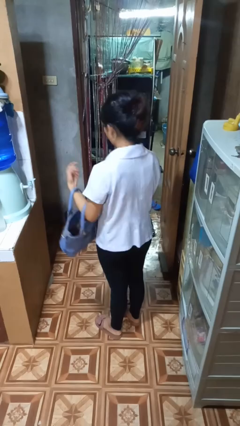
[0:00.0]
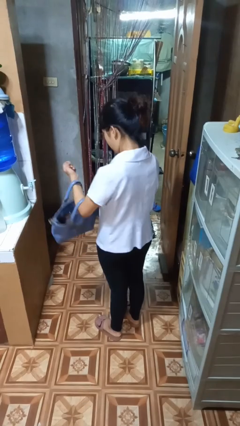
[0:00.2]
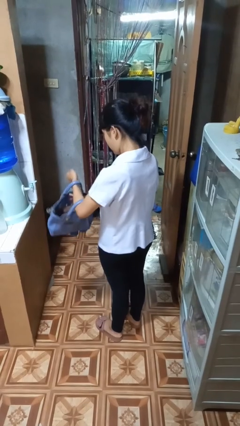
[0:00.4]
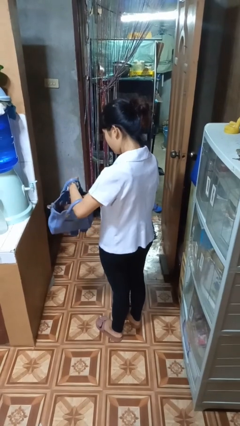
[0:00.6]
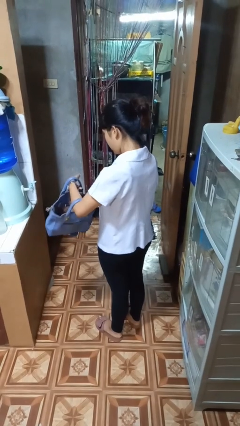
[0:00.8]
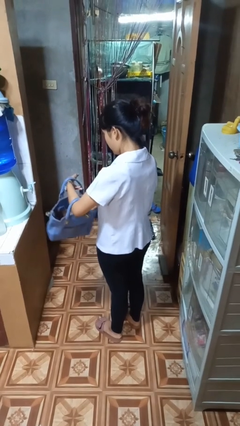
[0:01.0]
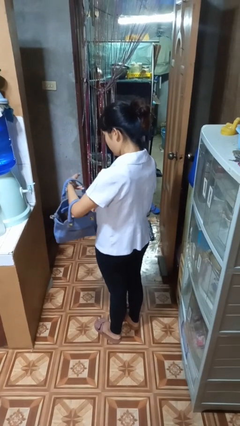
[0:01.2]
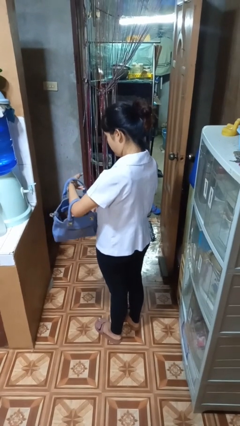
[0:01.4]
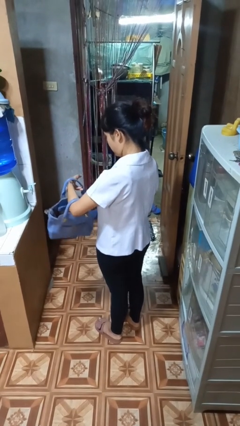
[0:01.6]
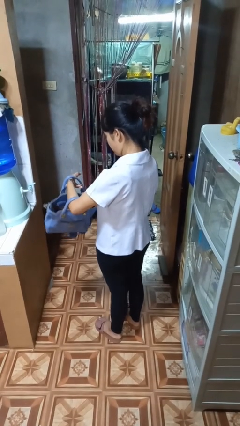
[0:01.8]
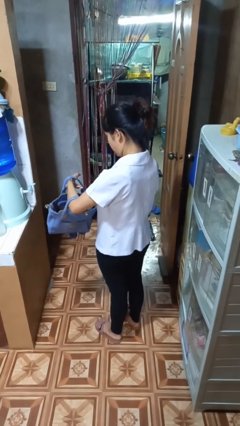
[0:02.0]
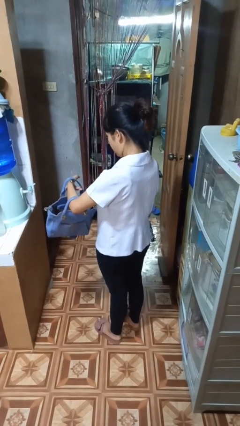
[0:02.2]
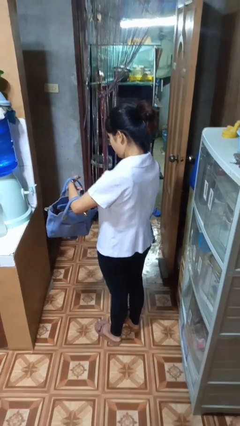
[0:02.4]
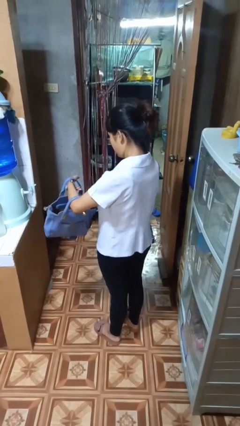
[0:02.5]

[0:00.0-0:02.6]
person searches in purse

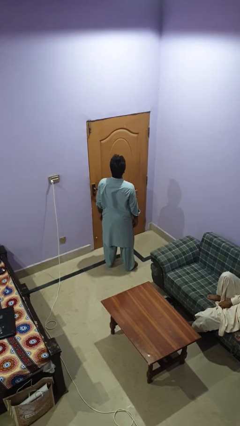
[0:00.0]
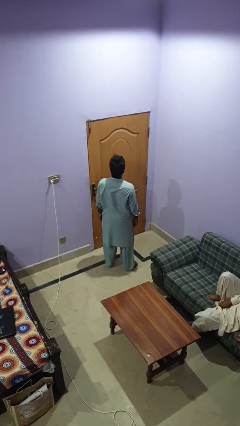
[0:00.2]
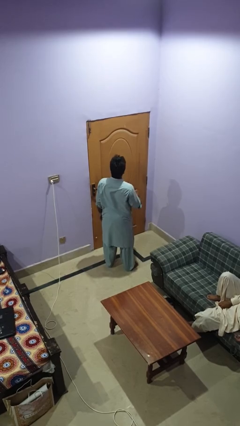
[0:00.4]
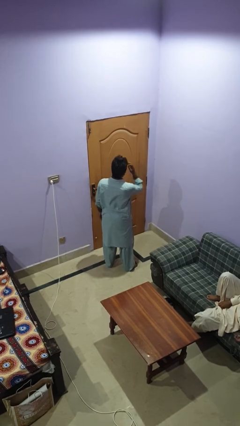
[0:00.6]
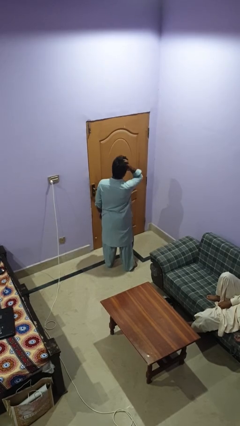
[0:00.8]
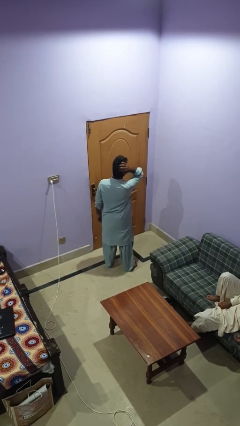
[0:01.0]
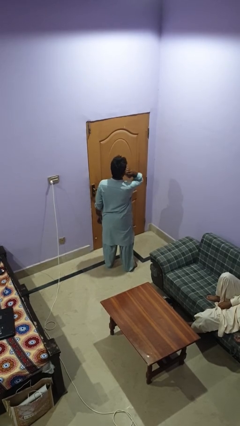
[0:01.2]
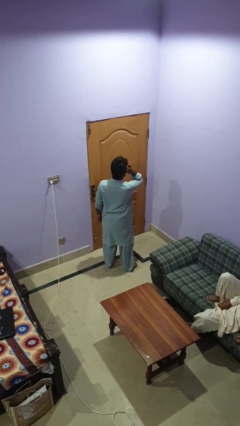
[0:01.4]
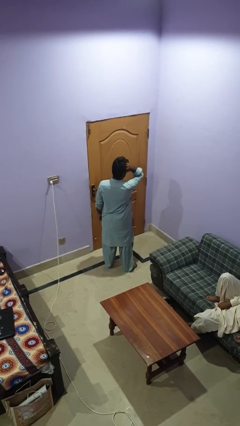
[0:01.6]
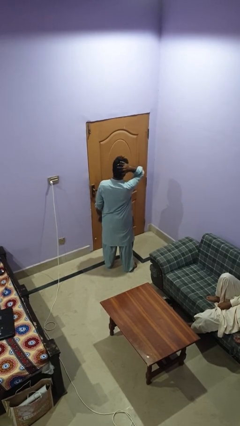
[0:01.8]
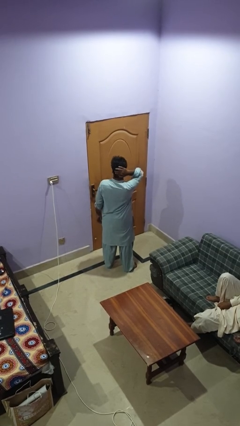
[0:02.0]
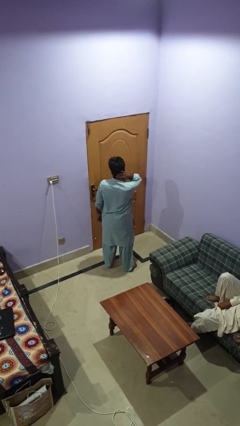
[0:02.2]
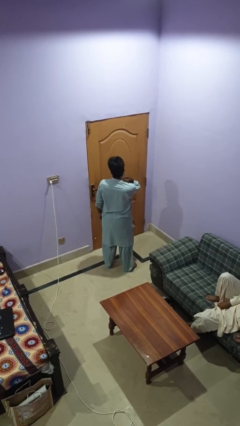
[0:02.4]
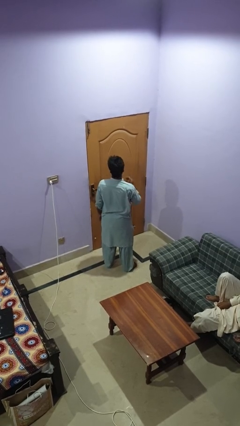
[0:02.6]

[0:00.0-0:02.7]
person strokes hair

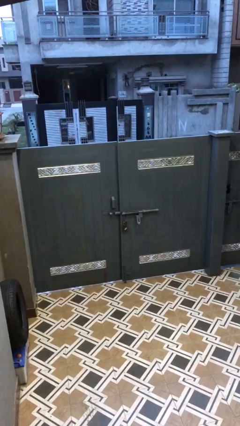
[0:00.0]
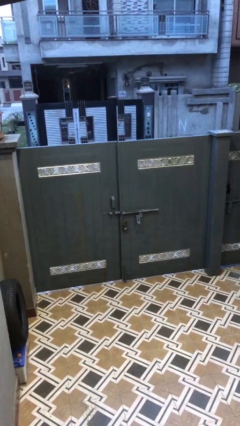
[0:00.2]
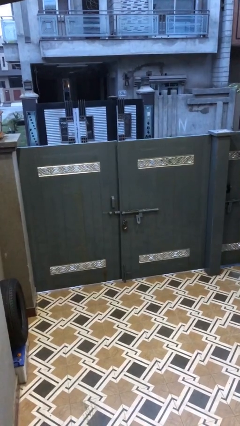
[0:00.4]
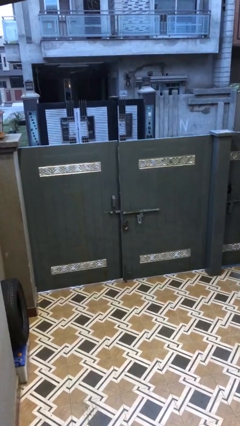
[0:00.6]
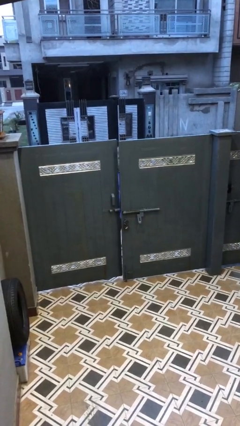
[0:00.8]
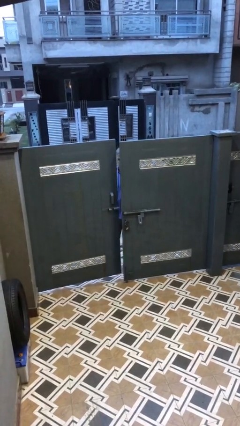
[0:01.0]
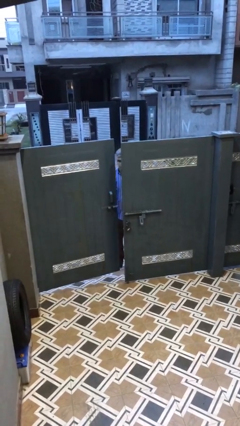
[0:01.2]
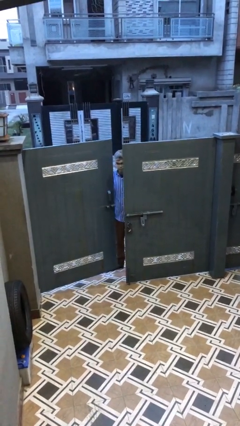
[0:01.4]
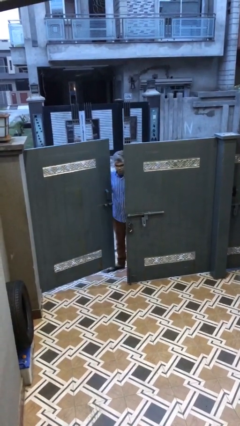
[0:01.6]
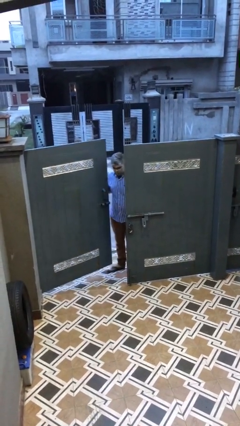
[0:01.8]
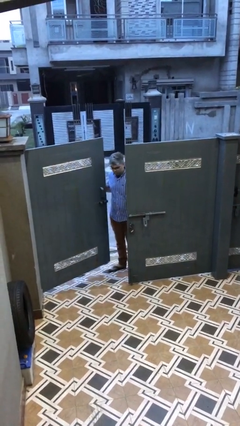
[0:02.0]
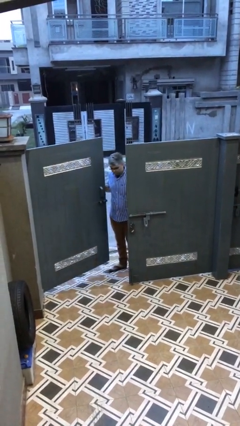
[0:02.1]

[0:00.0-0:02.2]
person opens facility door

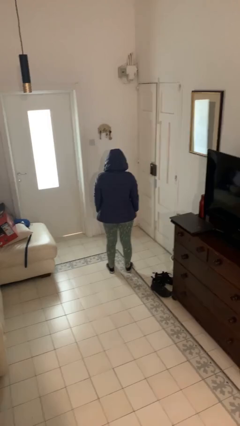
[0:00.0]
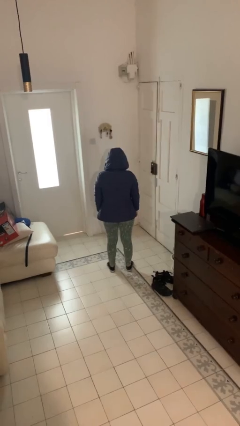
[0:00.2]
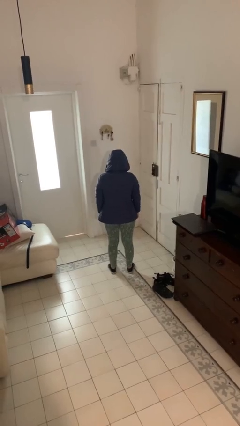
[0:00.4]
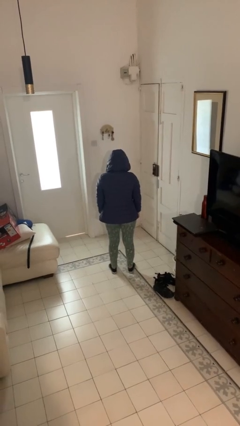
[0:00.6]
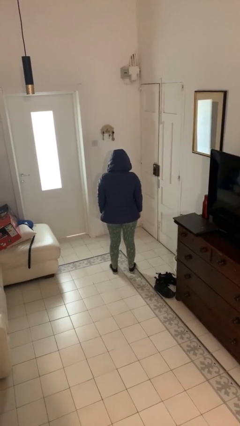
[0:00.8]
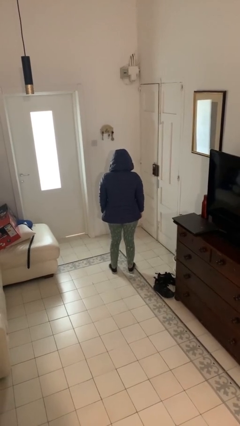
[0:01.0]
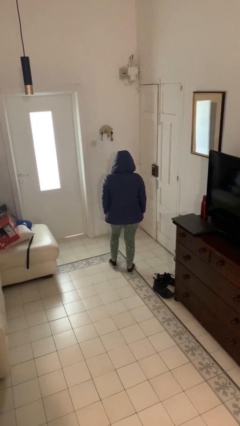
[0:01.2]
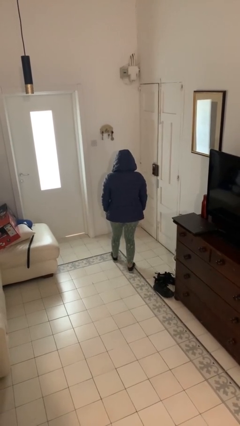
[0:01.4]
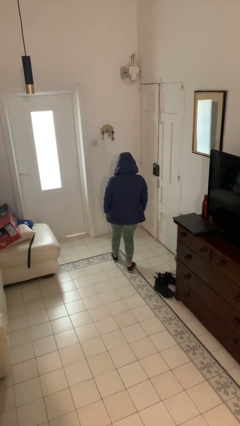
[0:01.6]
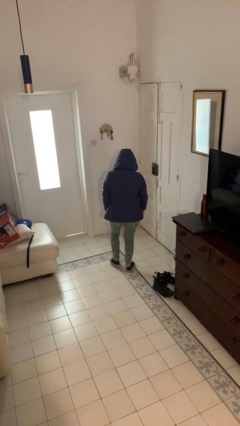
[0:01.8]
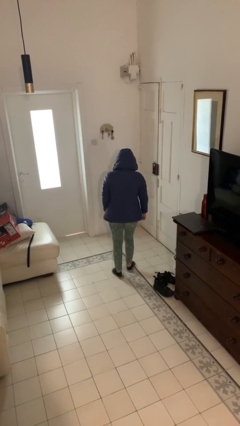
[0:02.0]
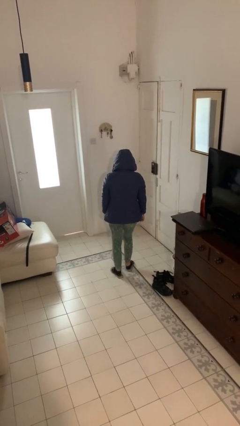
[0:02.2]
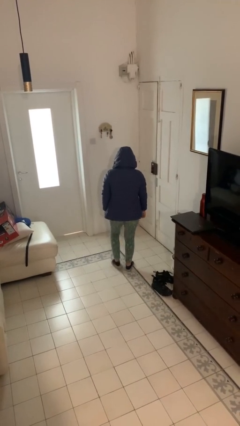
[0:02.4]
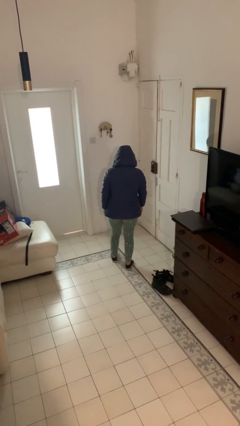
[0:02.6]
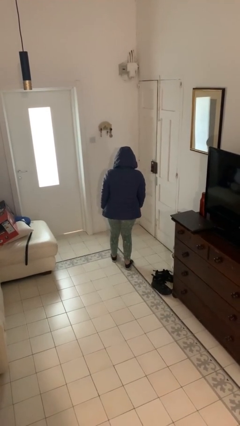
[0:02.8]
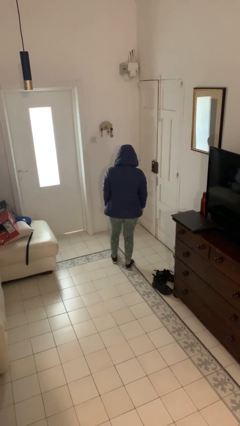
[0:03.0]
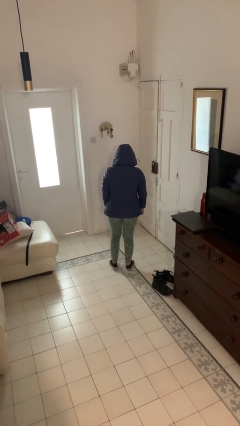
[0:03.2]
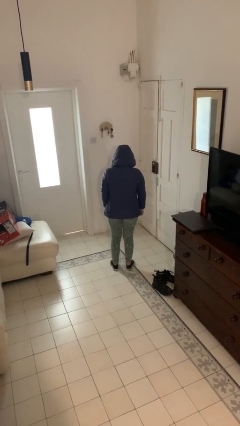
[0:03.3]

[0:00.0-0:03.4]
person dances in place

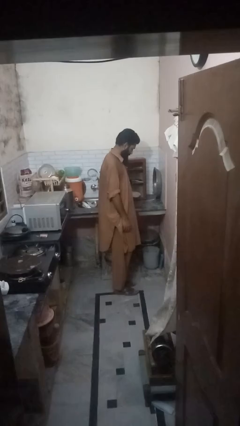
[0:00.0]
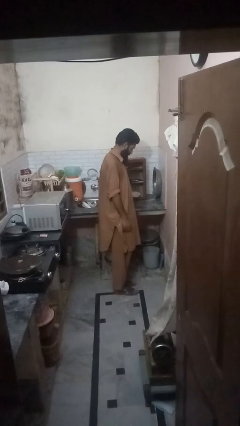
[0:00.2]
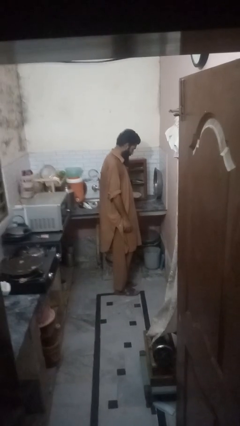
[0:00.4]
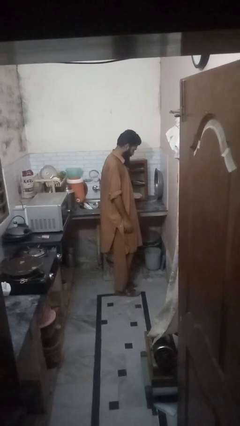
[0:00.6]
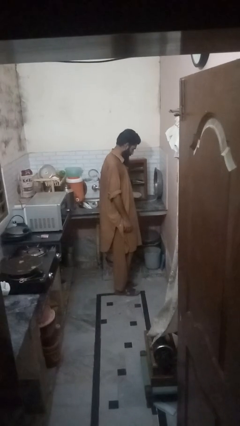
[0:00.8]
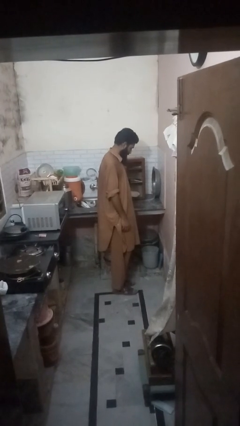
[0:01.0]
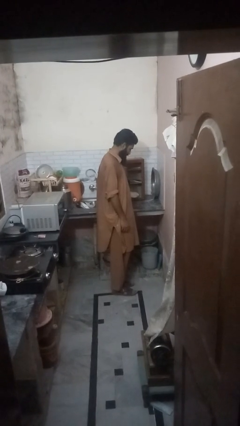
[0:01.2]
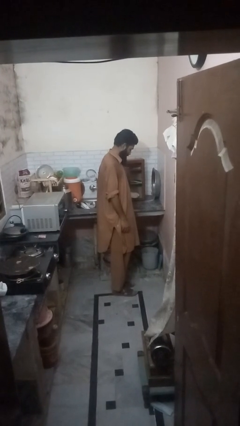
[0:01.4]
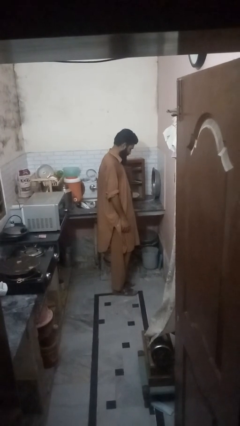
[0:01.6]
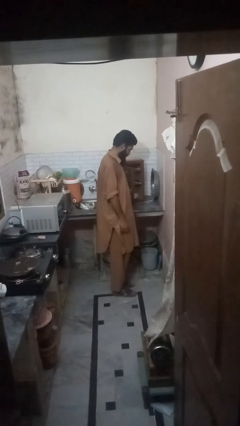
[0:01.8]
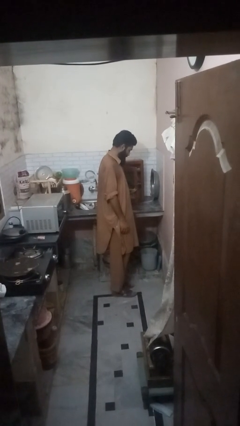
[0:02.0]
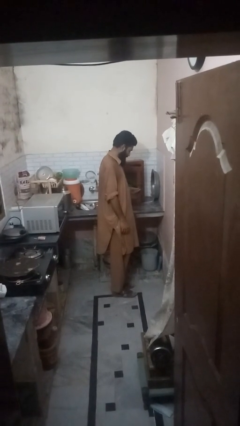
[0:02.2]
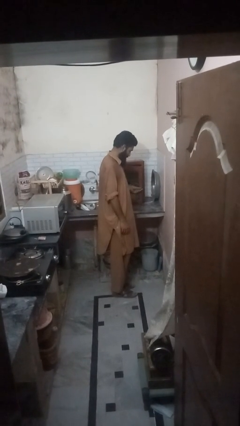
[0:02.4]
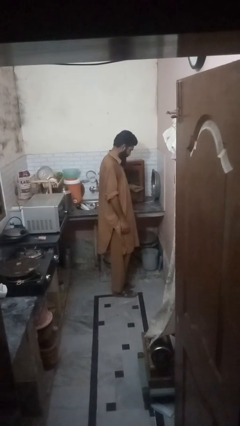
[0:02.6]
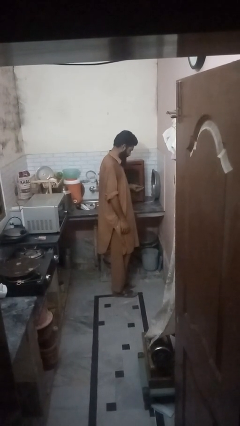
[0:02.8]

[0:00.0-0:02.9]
person closes cabinet

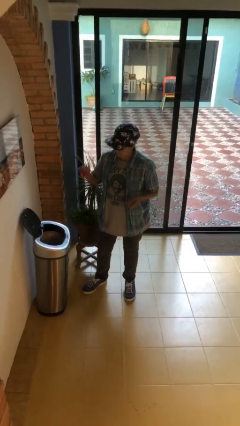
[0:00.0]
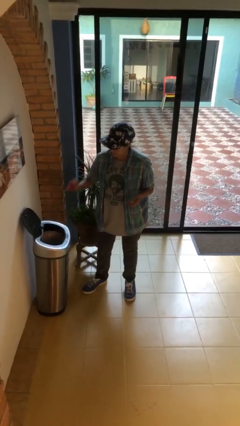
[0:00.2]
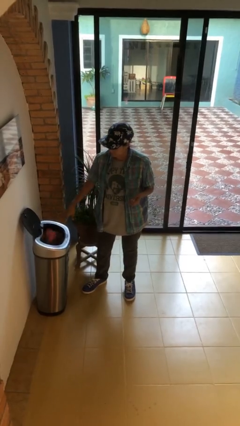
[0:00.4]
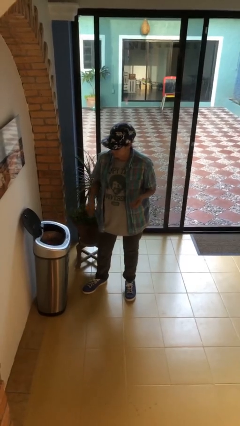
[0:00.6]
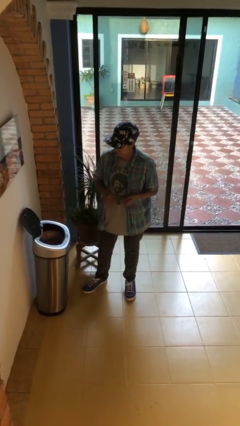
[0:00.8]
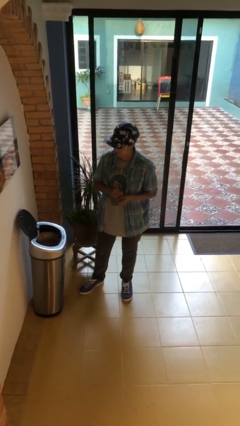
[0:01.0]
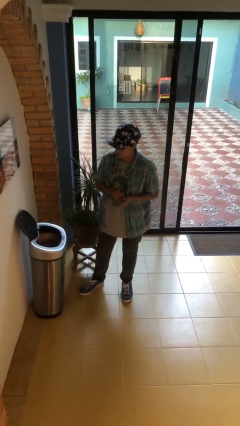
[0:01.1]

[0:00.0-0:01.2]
person discards trash

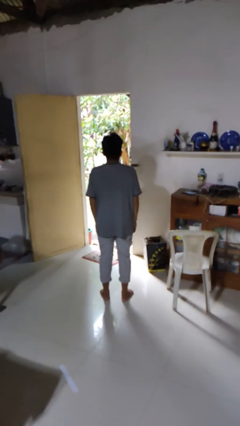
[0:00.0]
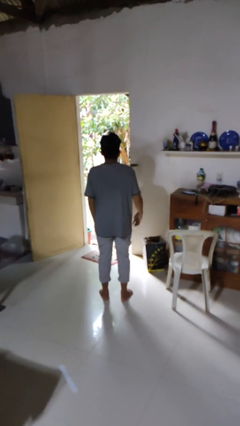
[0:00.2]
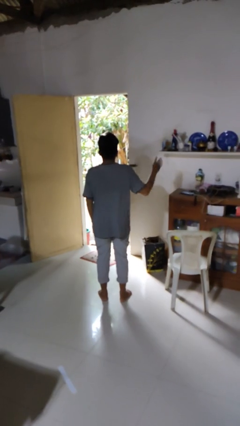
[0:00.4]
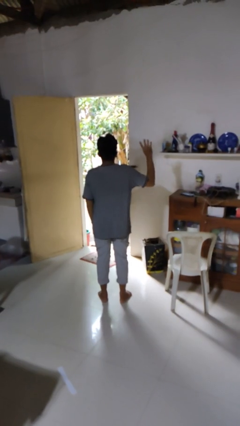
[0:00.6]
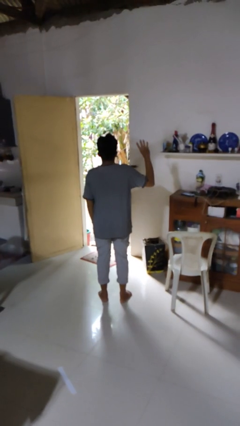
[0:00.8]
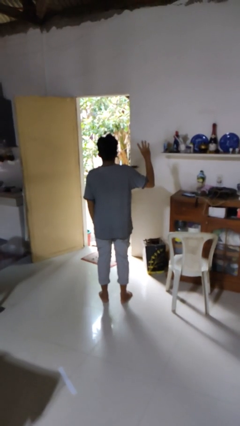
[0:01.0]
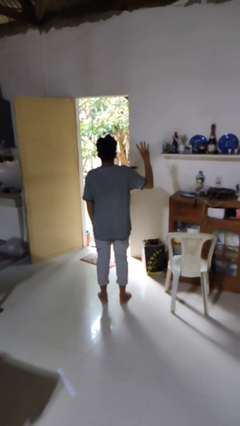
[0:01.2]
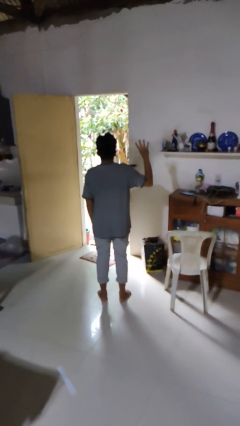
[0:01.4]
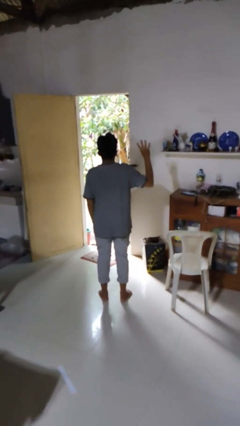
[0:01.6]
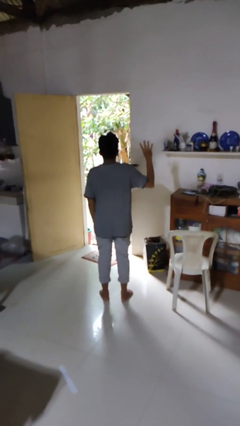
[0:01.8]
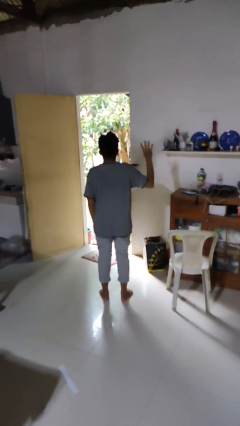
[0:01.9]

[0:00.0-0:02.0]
person gestures number four

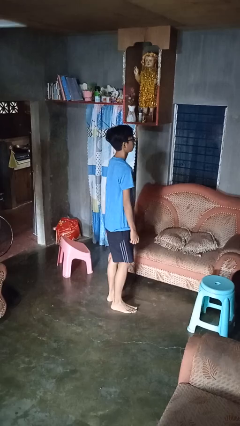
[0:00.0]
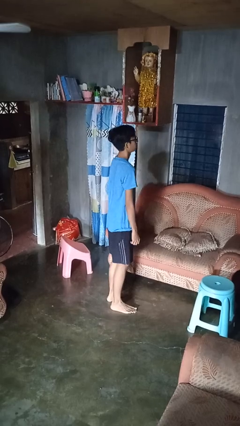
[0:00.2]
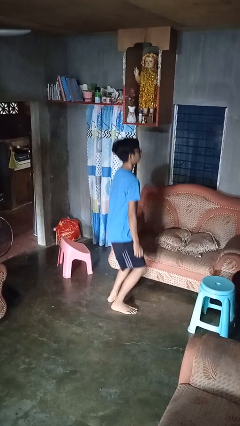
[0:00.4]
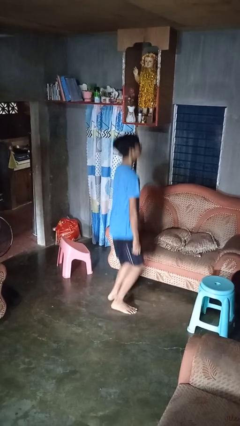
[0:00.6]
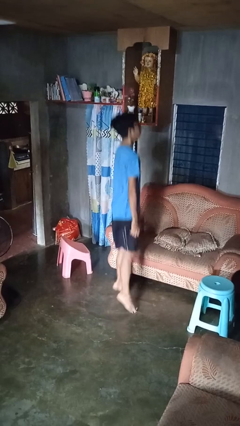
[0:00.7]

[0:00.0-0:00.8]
person jumps
